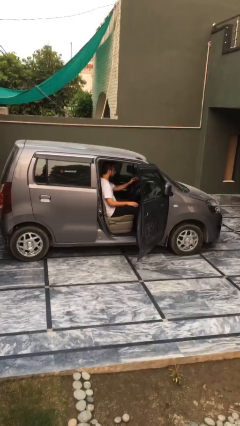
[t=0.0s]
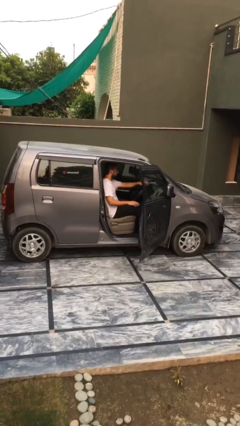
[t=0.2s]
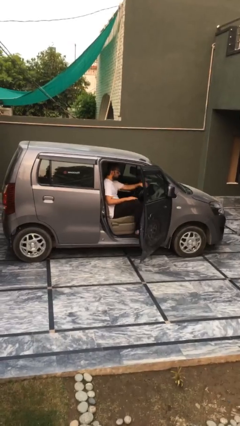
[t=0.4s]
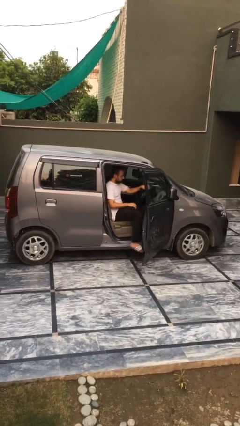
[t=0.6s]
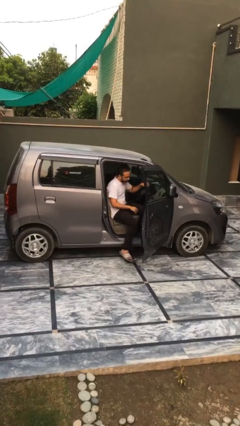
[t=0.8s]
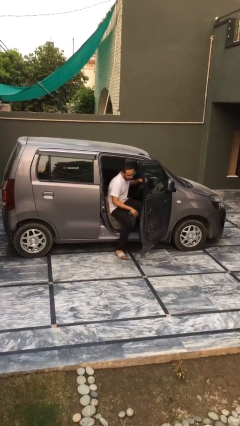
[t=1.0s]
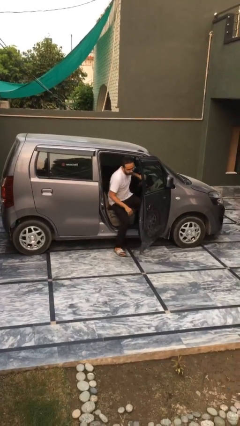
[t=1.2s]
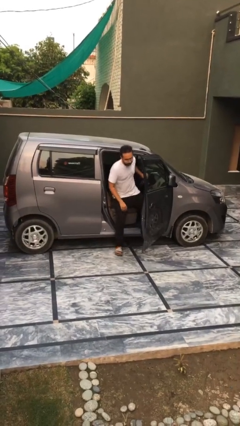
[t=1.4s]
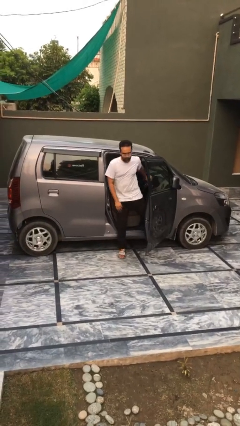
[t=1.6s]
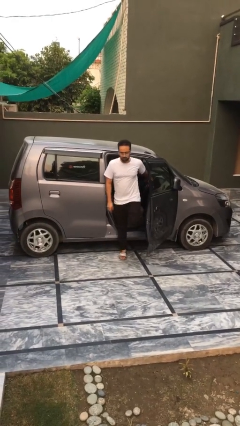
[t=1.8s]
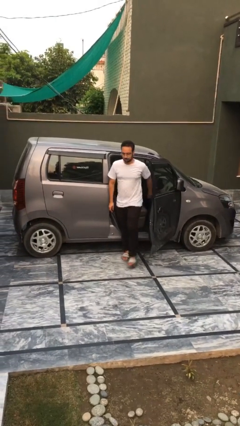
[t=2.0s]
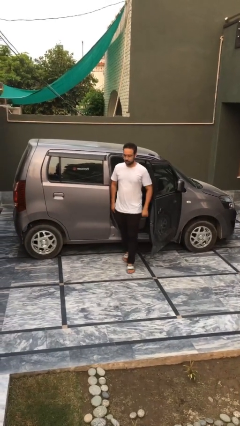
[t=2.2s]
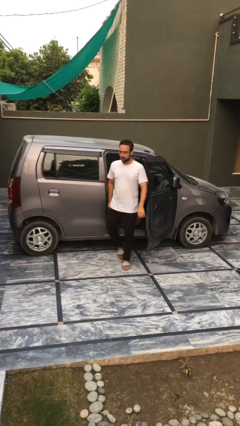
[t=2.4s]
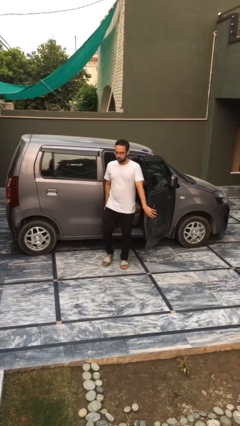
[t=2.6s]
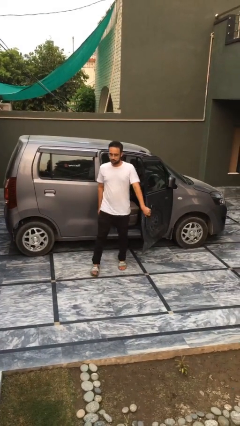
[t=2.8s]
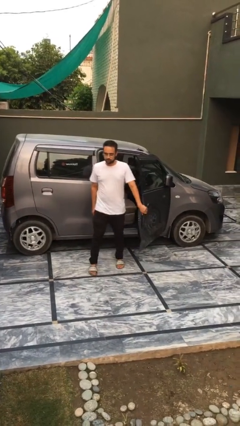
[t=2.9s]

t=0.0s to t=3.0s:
person exits car

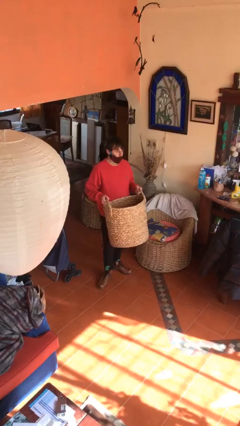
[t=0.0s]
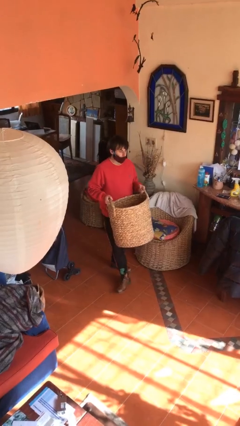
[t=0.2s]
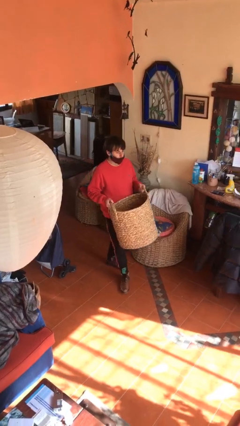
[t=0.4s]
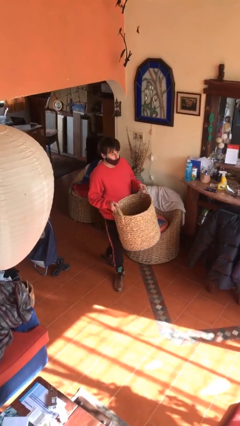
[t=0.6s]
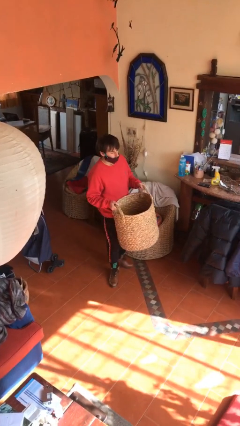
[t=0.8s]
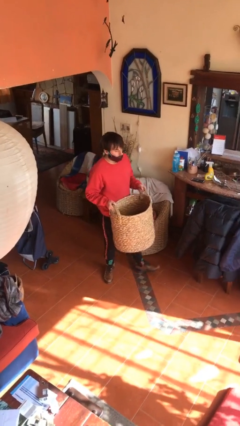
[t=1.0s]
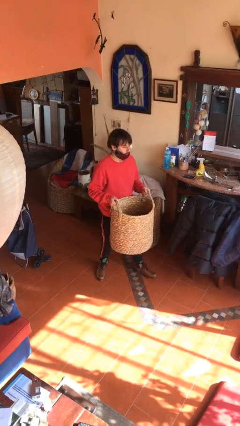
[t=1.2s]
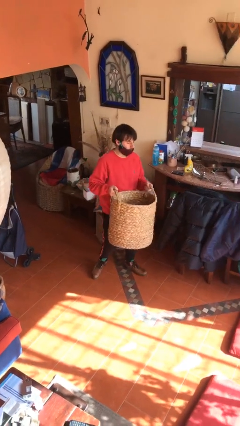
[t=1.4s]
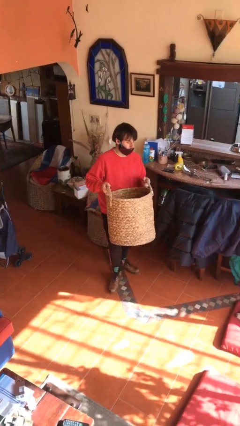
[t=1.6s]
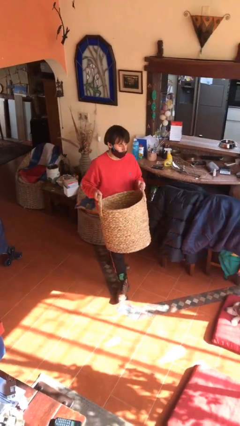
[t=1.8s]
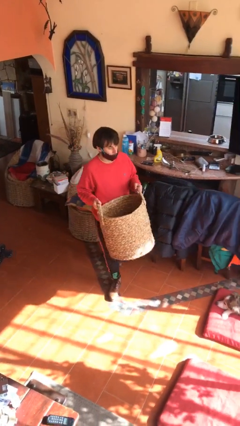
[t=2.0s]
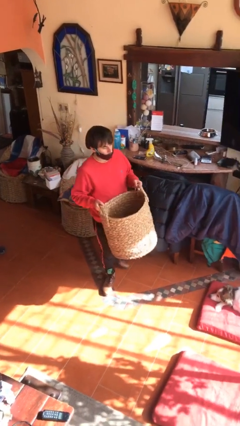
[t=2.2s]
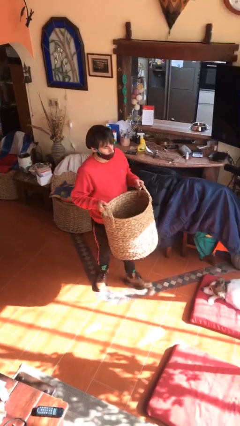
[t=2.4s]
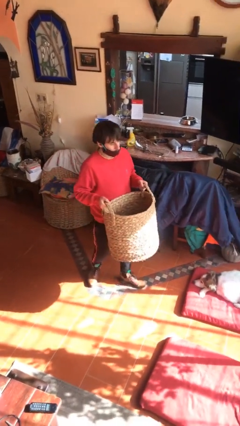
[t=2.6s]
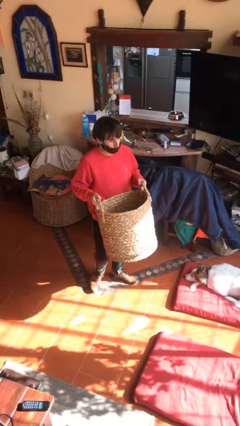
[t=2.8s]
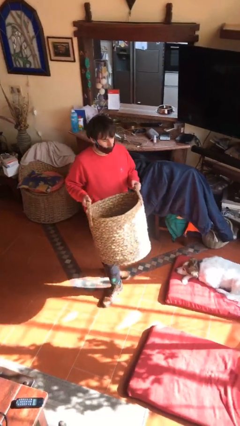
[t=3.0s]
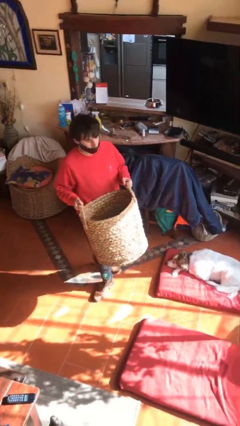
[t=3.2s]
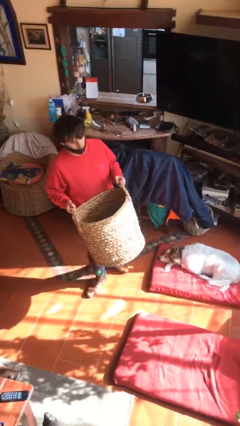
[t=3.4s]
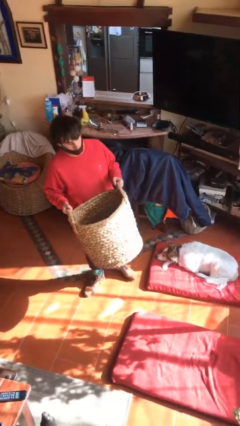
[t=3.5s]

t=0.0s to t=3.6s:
person carries laundry basket

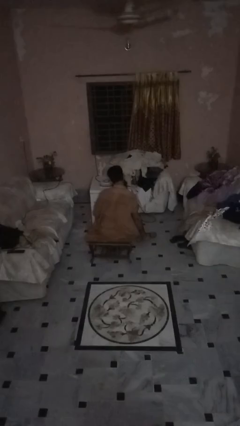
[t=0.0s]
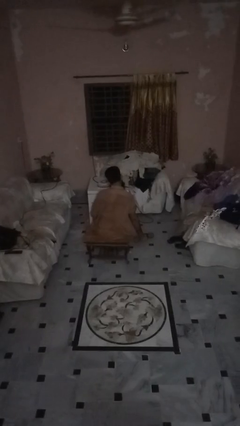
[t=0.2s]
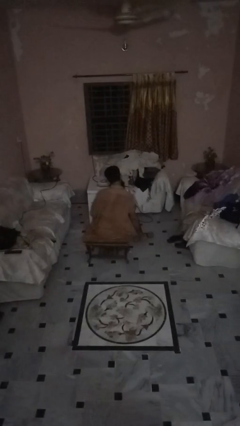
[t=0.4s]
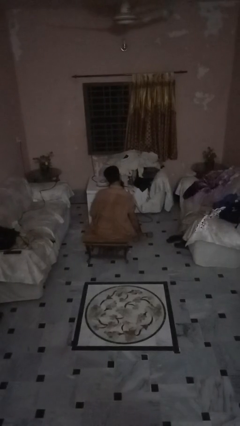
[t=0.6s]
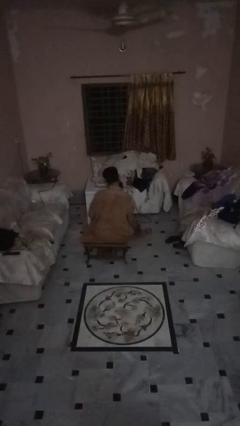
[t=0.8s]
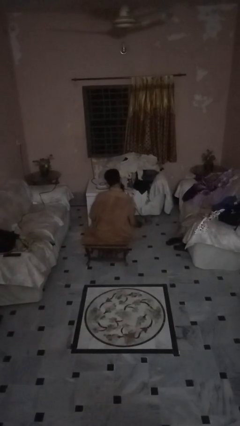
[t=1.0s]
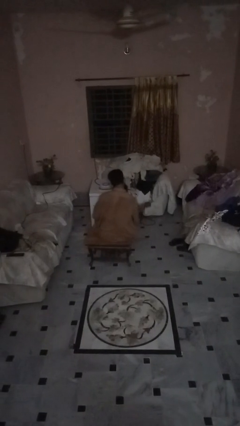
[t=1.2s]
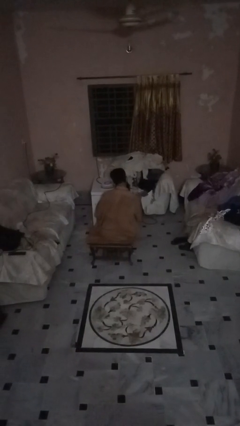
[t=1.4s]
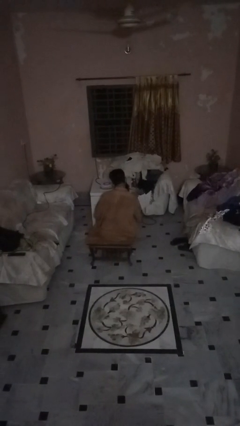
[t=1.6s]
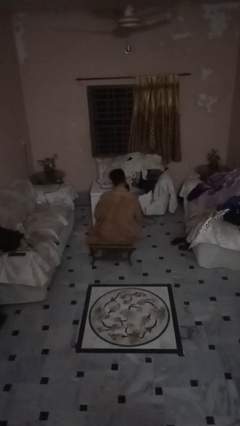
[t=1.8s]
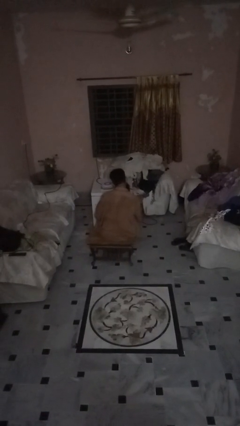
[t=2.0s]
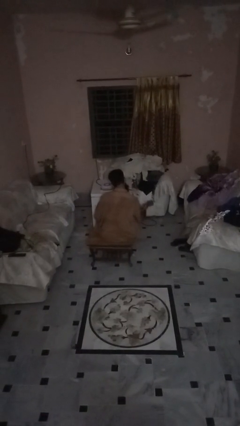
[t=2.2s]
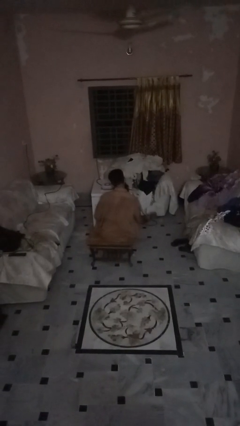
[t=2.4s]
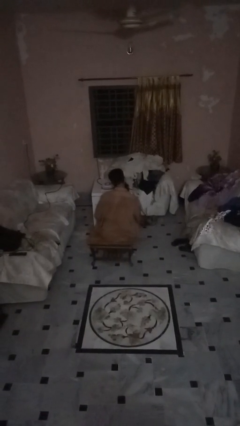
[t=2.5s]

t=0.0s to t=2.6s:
person lifts dumbbells

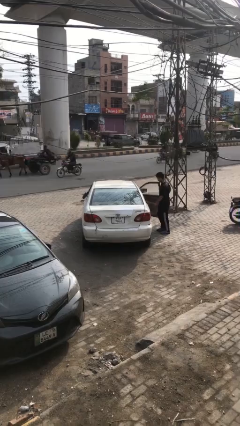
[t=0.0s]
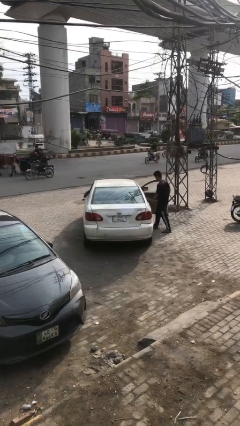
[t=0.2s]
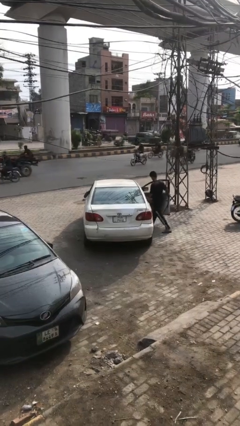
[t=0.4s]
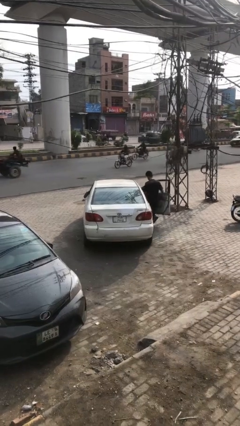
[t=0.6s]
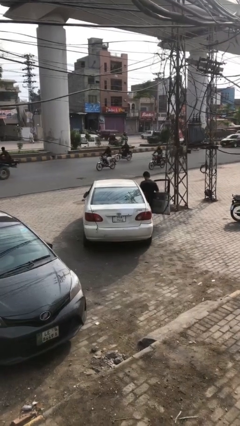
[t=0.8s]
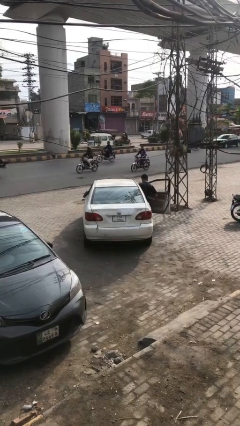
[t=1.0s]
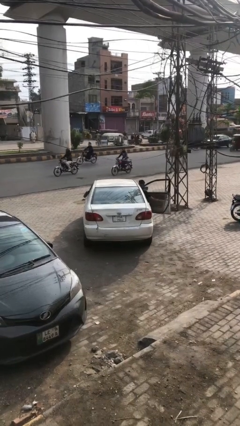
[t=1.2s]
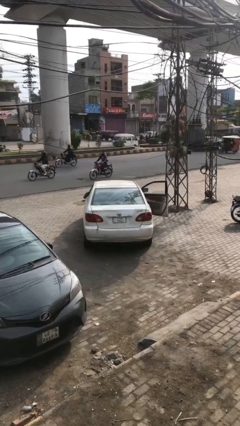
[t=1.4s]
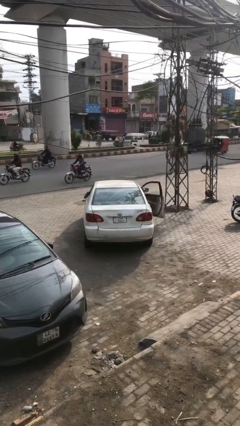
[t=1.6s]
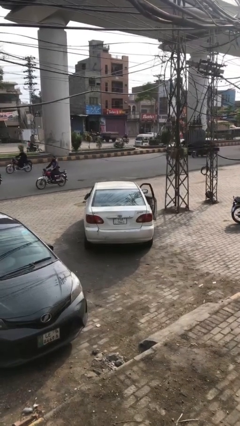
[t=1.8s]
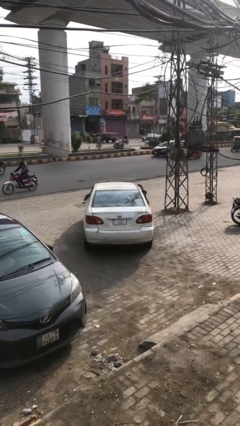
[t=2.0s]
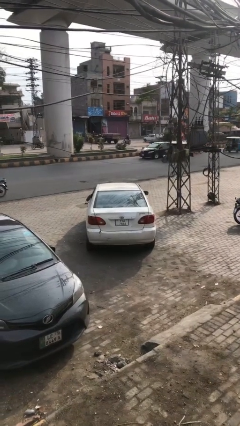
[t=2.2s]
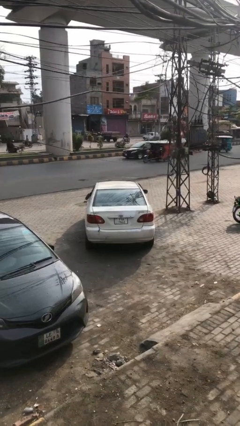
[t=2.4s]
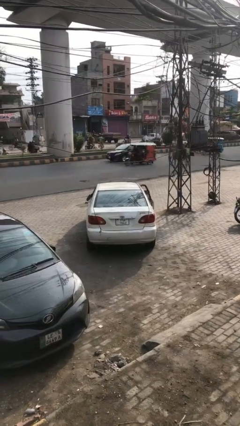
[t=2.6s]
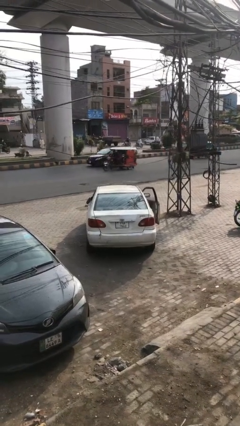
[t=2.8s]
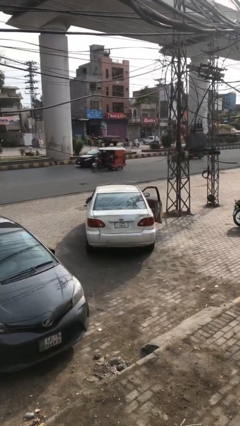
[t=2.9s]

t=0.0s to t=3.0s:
car picks up person

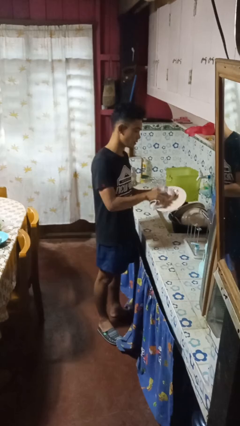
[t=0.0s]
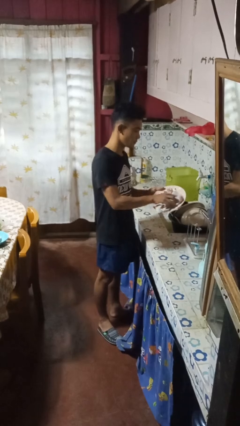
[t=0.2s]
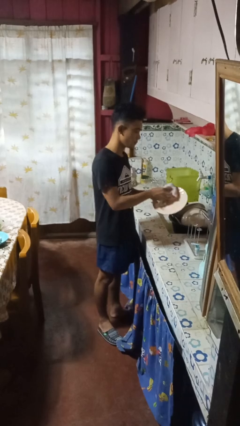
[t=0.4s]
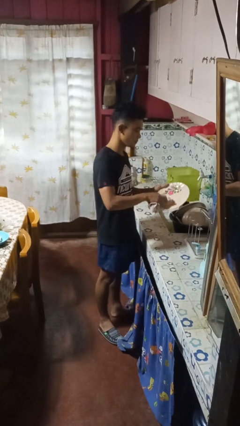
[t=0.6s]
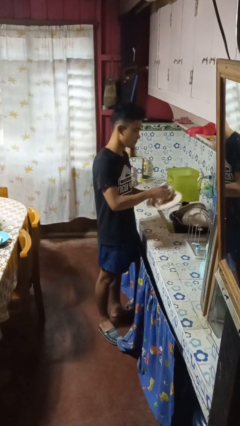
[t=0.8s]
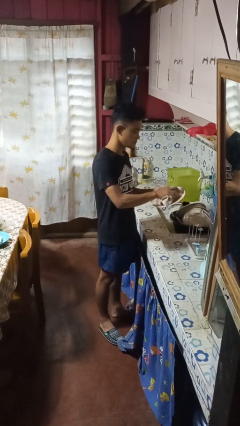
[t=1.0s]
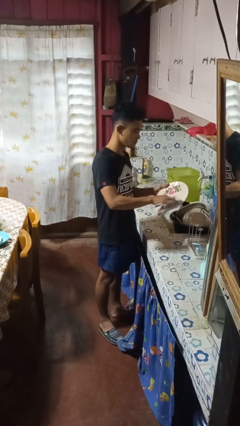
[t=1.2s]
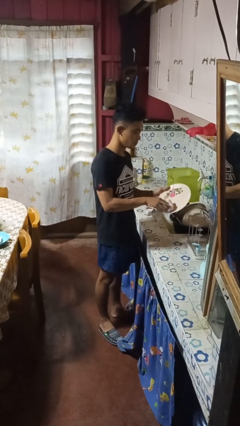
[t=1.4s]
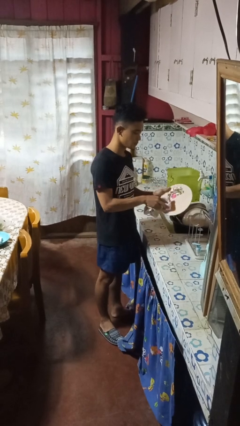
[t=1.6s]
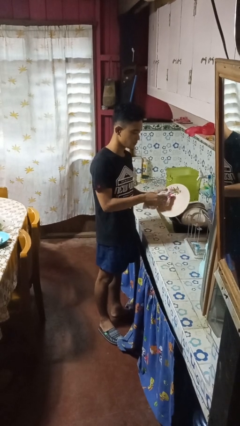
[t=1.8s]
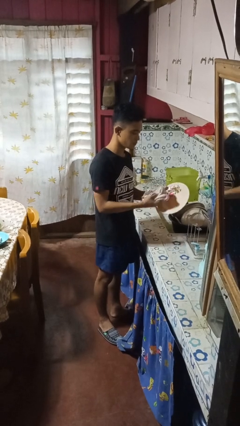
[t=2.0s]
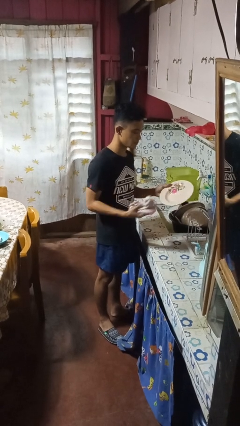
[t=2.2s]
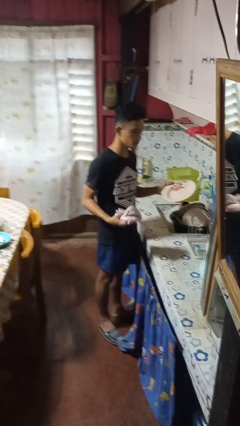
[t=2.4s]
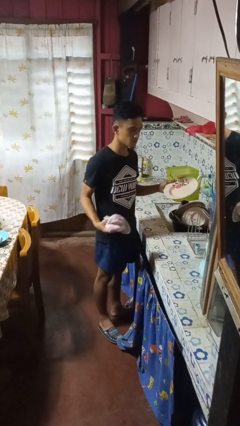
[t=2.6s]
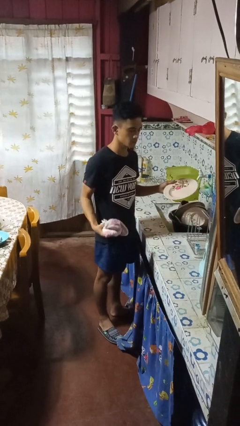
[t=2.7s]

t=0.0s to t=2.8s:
person dries dish

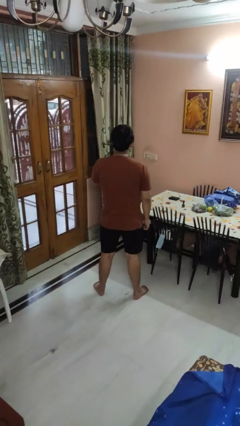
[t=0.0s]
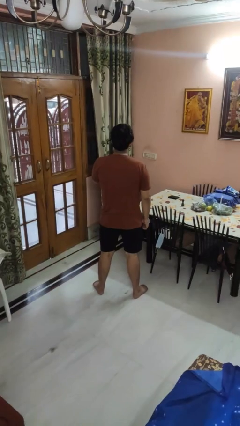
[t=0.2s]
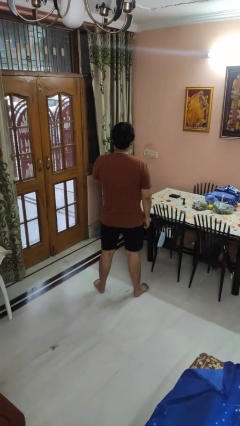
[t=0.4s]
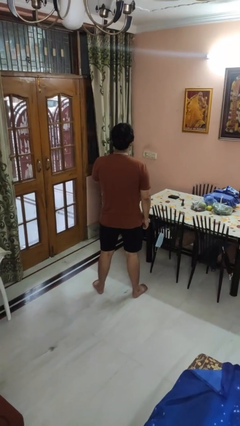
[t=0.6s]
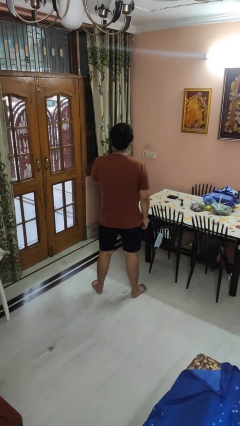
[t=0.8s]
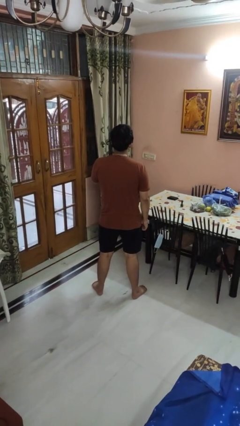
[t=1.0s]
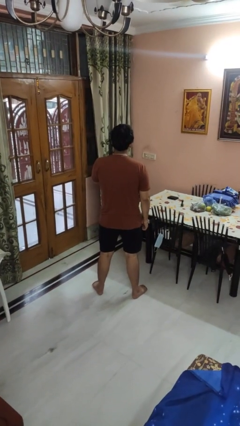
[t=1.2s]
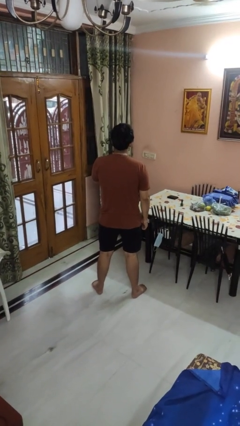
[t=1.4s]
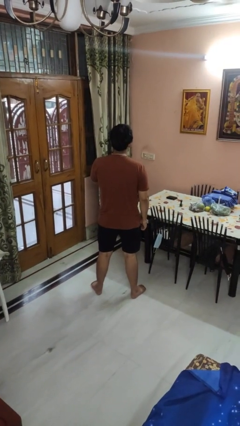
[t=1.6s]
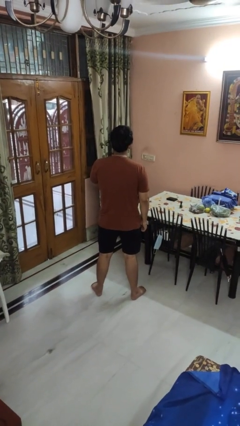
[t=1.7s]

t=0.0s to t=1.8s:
person strokes chin

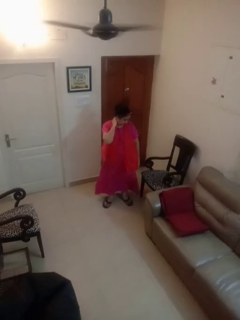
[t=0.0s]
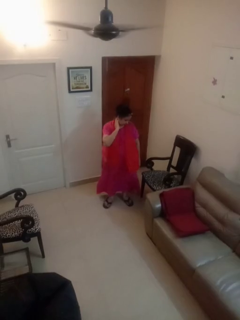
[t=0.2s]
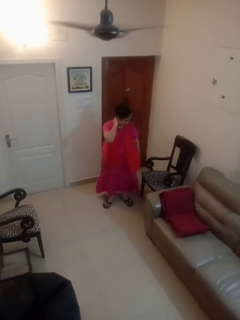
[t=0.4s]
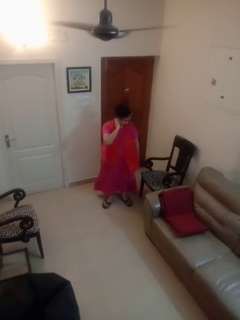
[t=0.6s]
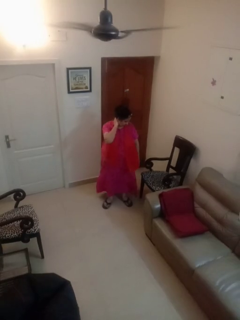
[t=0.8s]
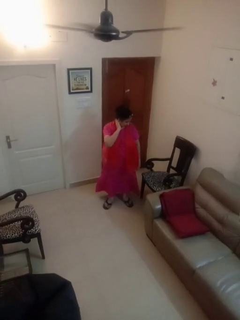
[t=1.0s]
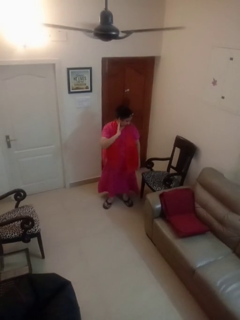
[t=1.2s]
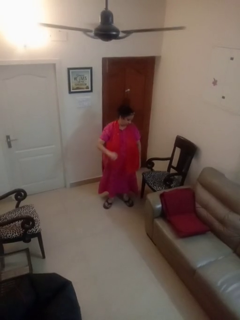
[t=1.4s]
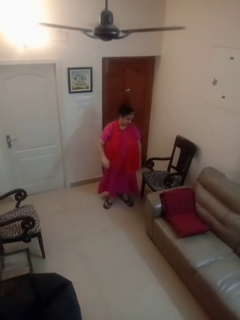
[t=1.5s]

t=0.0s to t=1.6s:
person rubs neck
